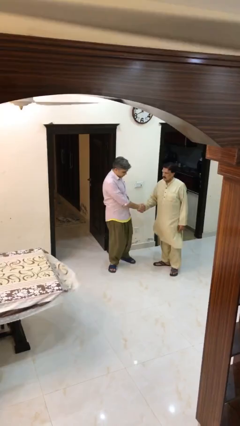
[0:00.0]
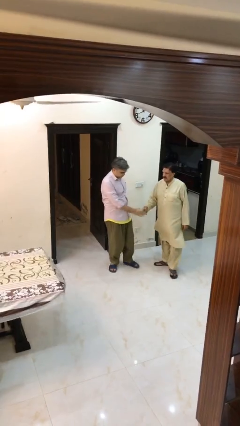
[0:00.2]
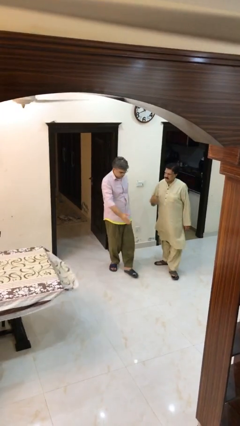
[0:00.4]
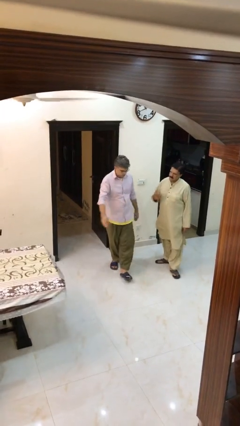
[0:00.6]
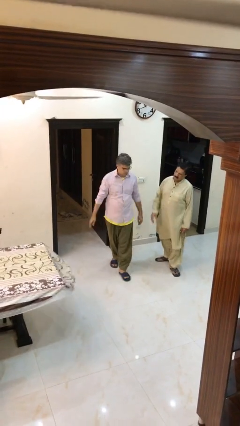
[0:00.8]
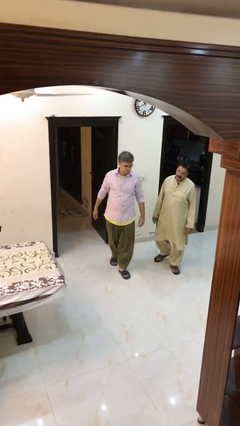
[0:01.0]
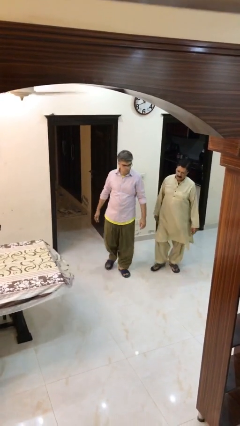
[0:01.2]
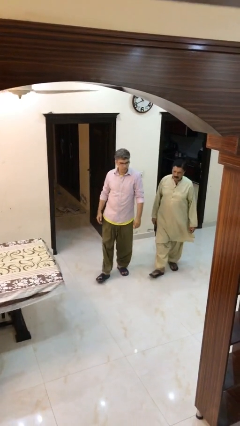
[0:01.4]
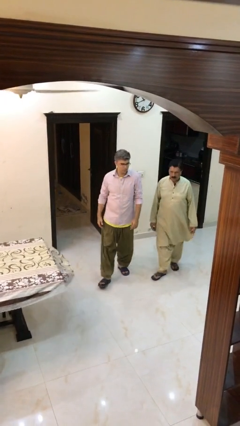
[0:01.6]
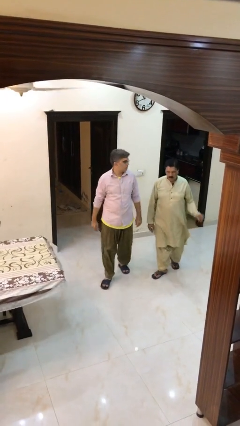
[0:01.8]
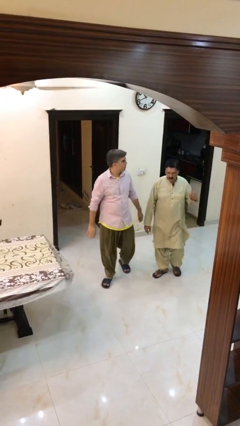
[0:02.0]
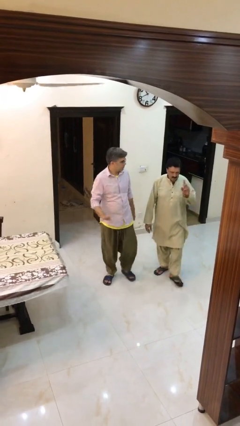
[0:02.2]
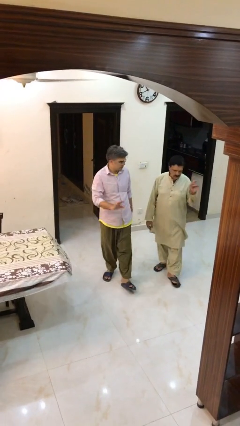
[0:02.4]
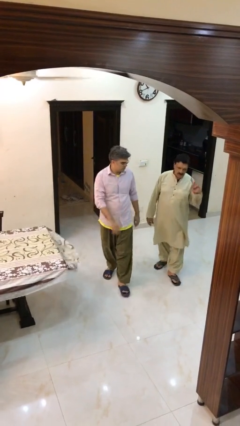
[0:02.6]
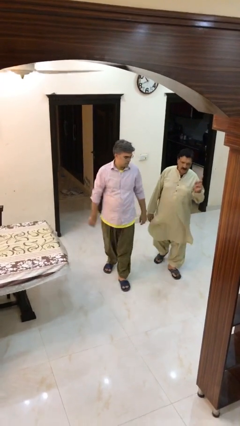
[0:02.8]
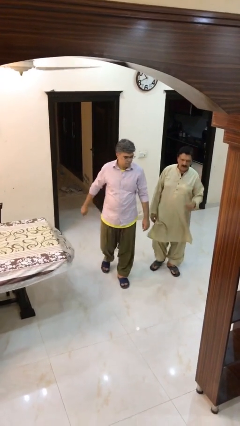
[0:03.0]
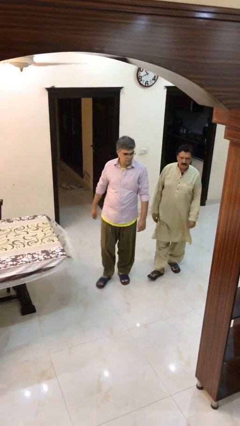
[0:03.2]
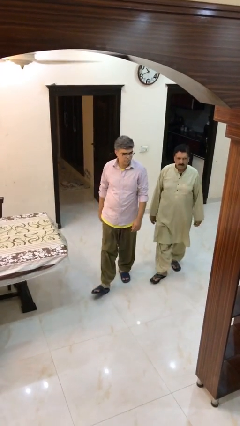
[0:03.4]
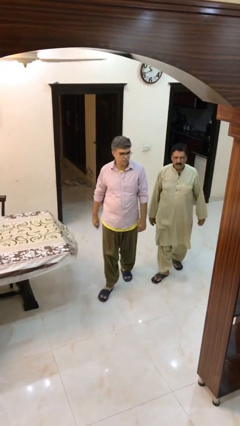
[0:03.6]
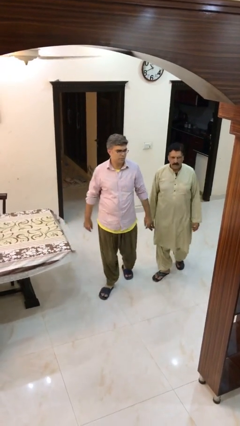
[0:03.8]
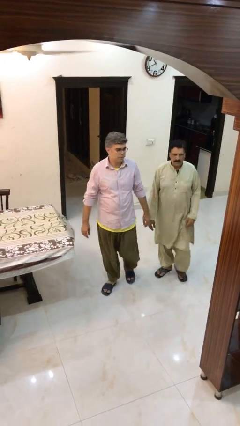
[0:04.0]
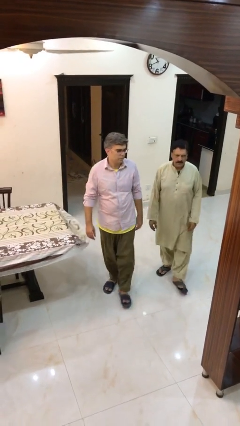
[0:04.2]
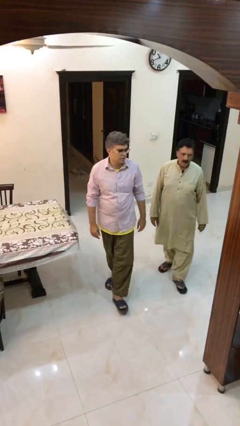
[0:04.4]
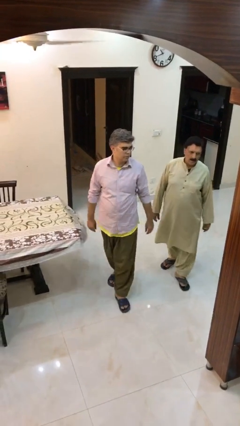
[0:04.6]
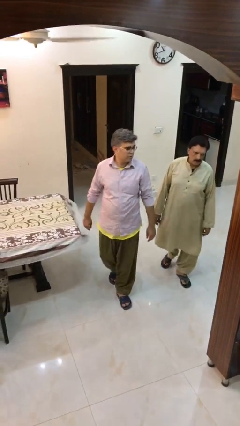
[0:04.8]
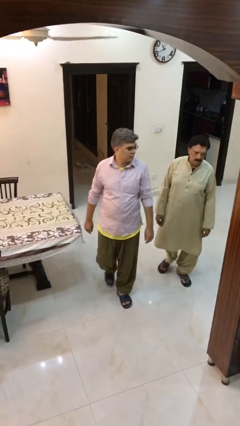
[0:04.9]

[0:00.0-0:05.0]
person talks to person

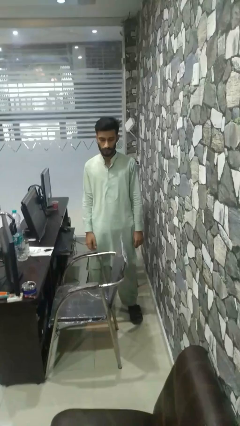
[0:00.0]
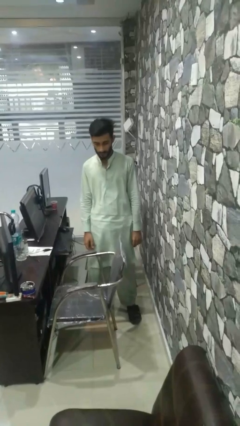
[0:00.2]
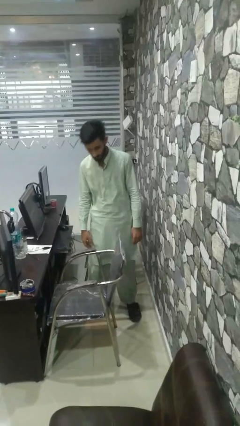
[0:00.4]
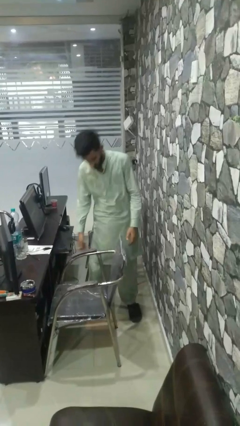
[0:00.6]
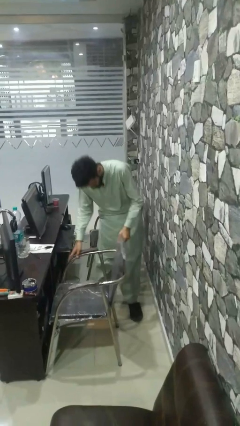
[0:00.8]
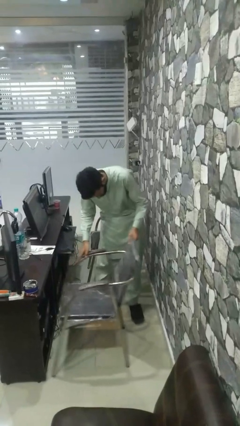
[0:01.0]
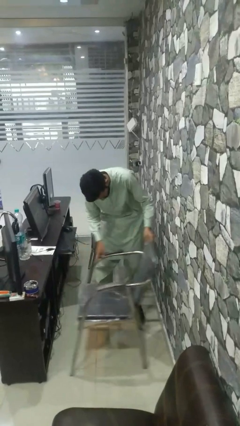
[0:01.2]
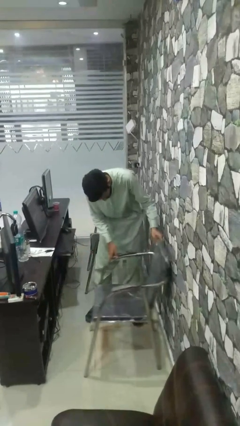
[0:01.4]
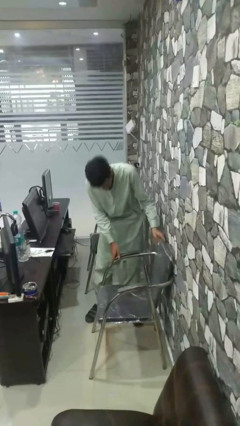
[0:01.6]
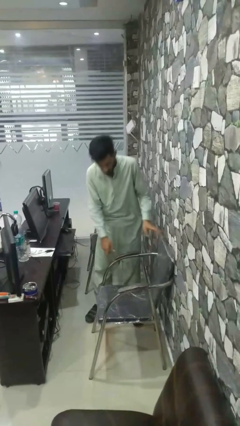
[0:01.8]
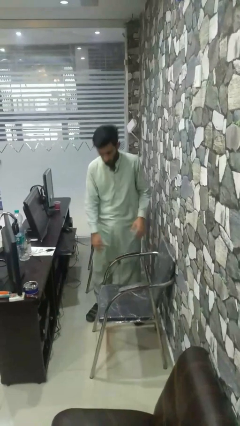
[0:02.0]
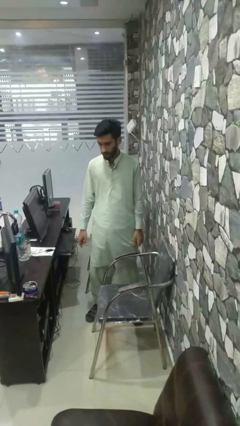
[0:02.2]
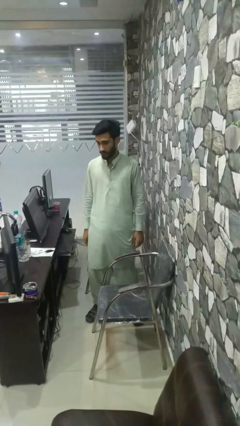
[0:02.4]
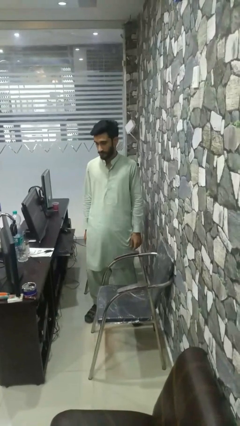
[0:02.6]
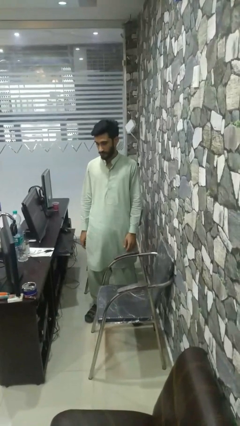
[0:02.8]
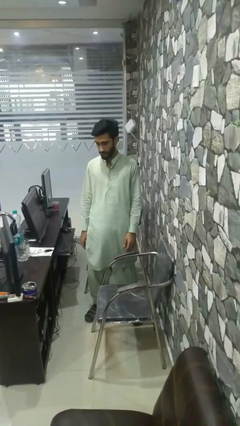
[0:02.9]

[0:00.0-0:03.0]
person pulls out chair

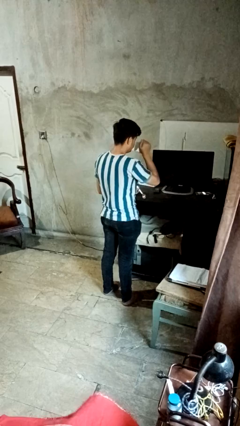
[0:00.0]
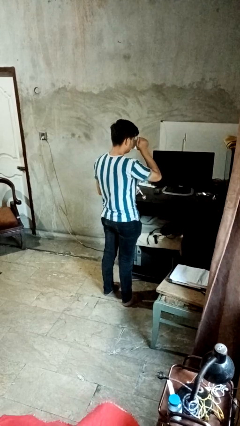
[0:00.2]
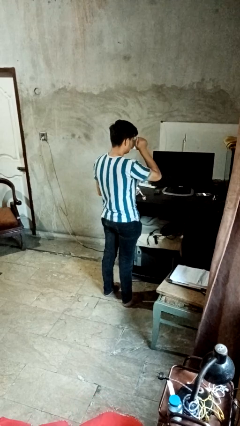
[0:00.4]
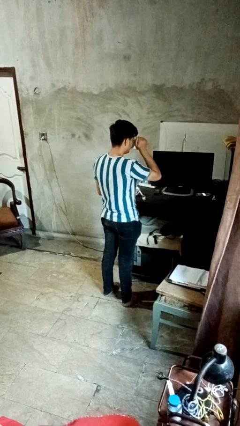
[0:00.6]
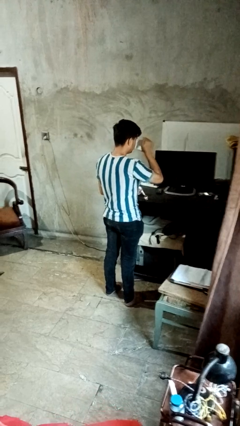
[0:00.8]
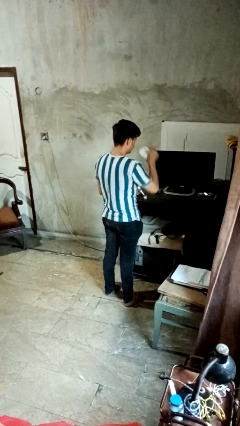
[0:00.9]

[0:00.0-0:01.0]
person drinks from mug

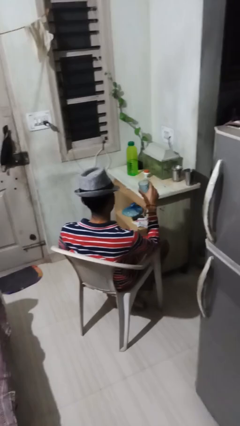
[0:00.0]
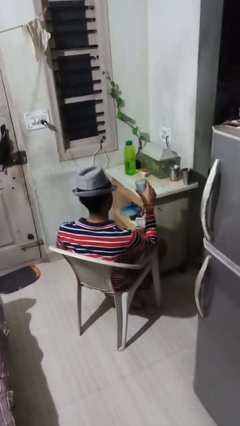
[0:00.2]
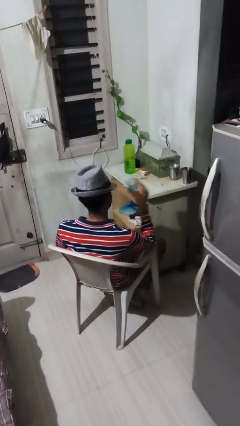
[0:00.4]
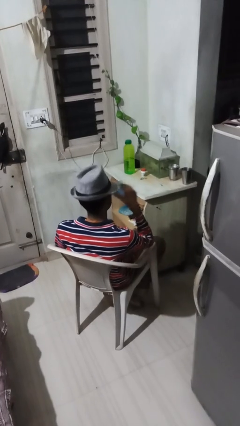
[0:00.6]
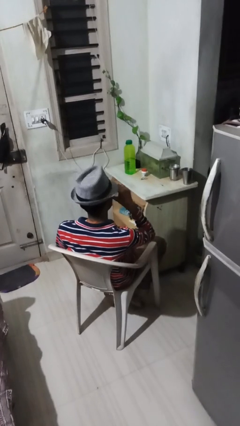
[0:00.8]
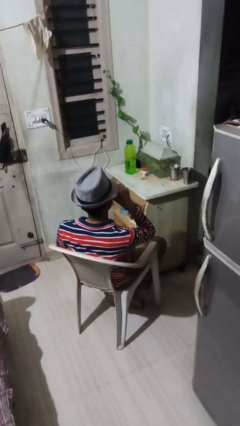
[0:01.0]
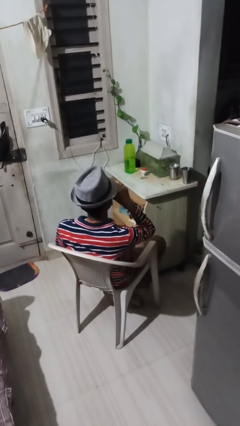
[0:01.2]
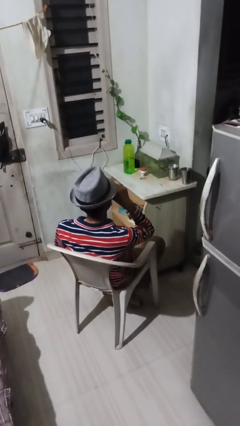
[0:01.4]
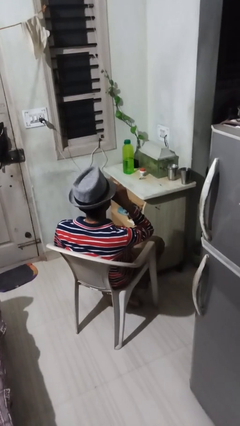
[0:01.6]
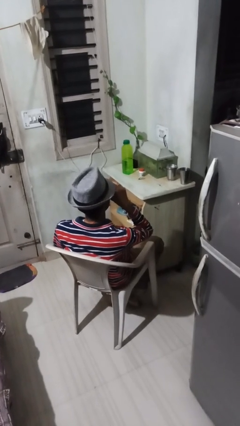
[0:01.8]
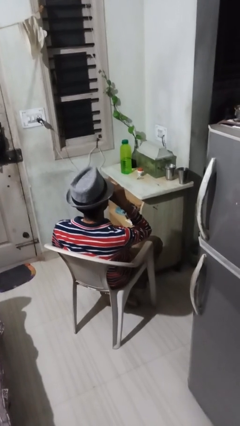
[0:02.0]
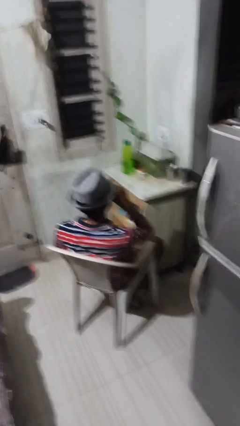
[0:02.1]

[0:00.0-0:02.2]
person drinks from shotglass

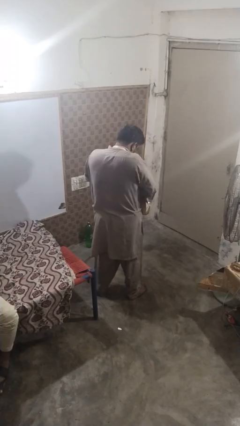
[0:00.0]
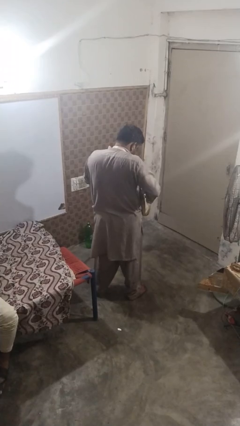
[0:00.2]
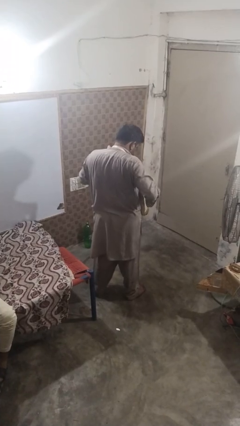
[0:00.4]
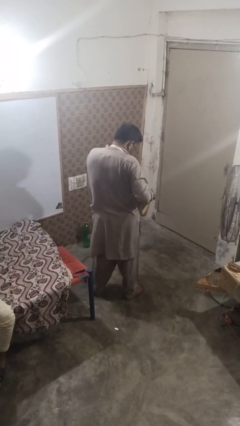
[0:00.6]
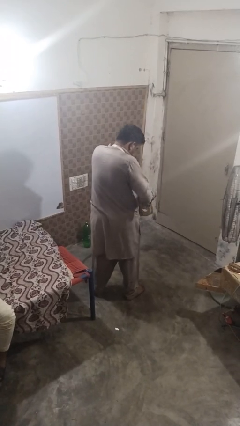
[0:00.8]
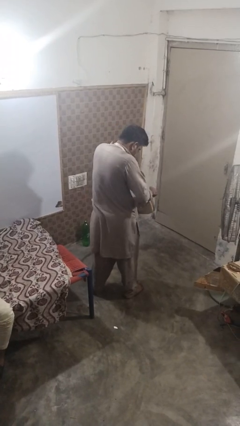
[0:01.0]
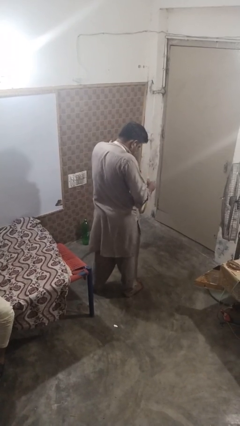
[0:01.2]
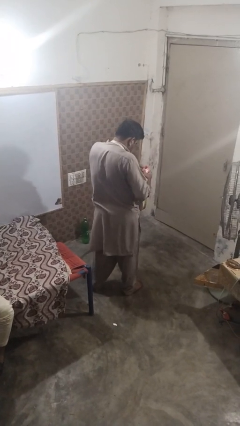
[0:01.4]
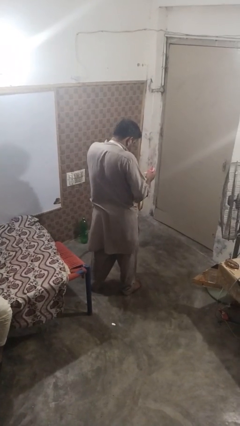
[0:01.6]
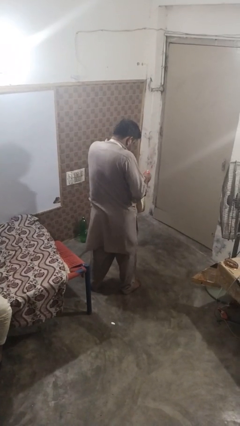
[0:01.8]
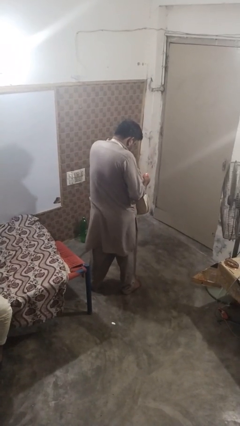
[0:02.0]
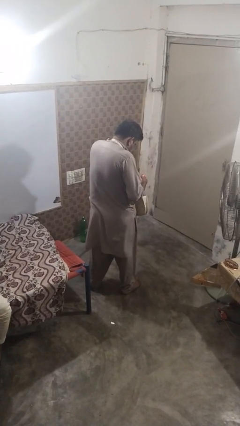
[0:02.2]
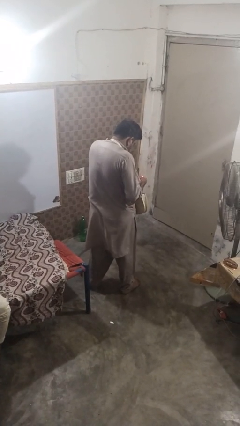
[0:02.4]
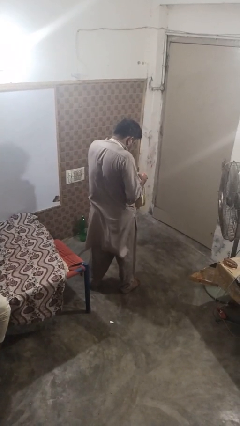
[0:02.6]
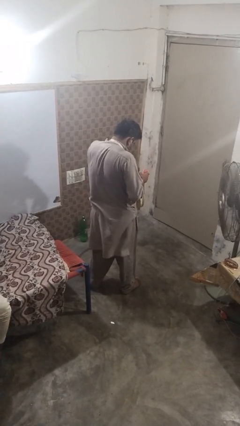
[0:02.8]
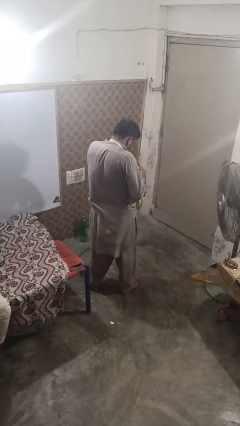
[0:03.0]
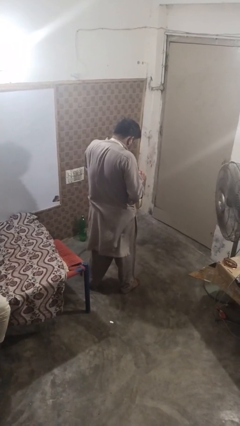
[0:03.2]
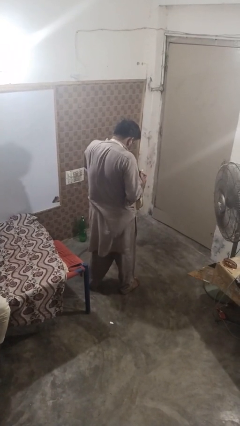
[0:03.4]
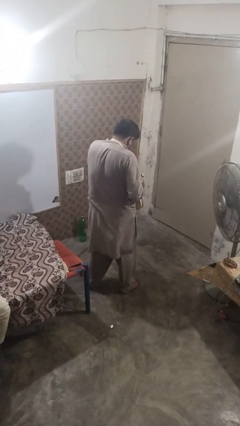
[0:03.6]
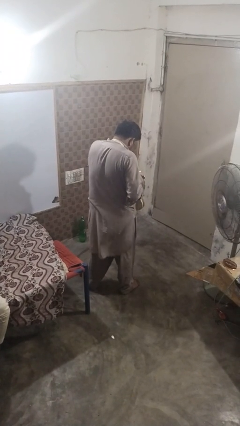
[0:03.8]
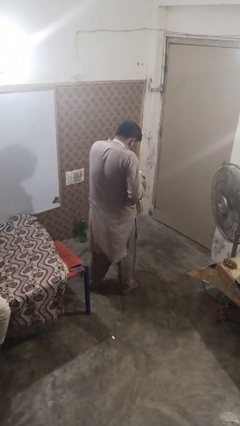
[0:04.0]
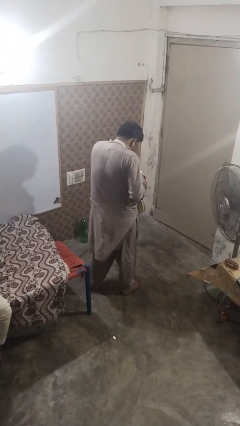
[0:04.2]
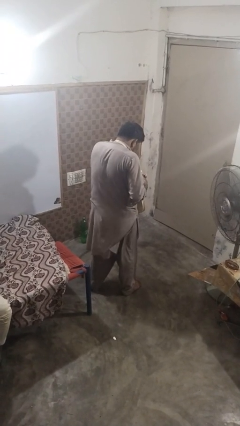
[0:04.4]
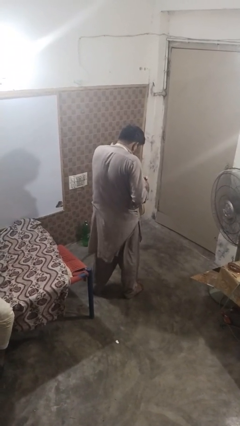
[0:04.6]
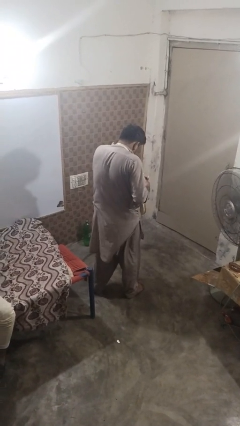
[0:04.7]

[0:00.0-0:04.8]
person takes object from purse

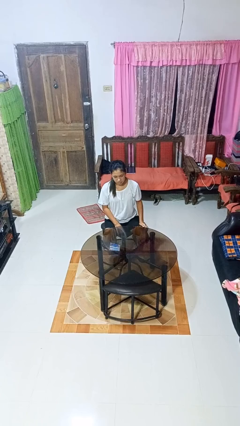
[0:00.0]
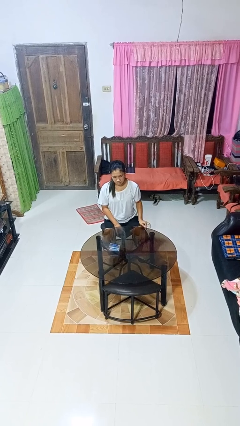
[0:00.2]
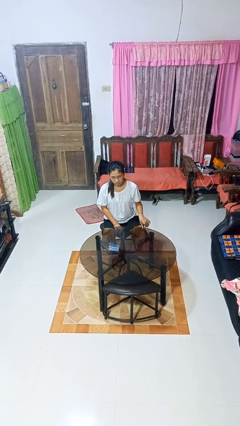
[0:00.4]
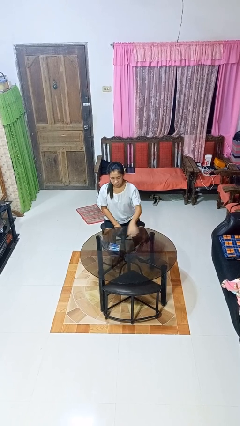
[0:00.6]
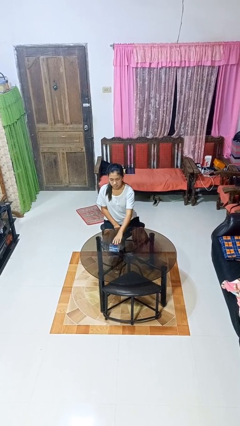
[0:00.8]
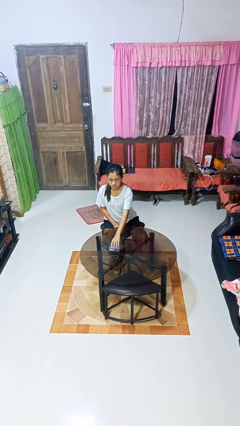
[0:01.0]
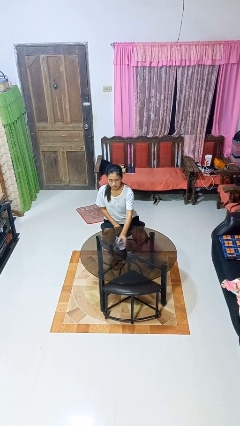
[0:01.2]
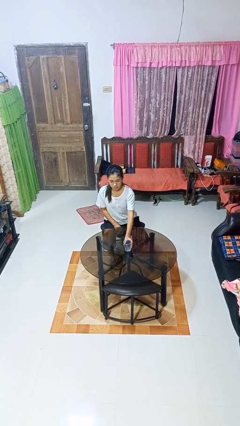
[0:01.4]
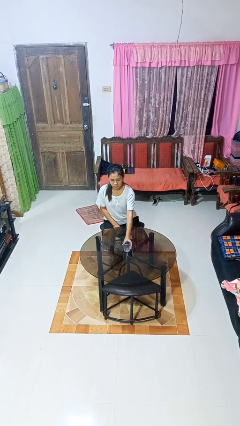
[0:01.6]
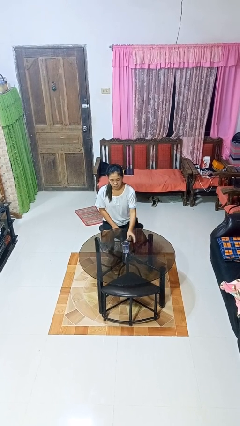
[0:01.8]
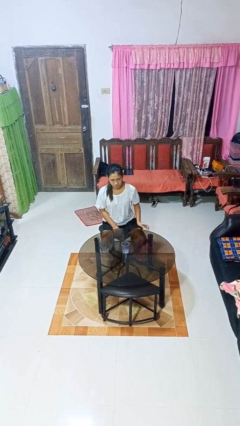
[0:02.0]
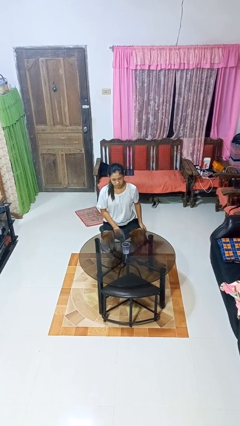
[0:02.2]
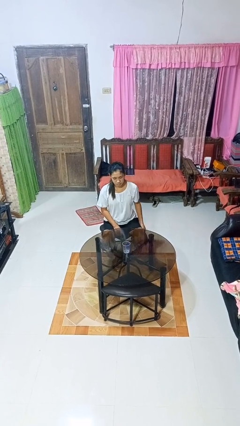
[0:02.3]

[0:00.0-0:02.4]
person sets upright glass
